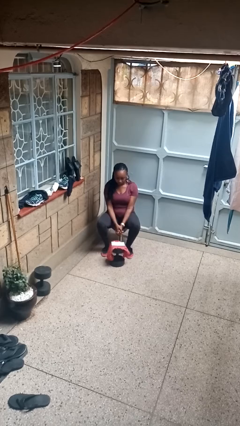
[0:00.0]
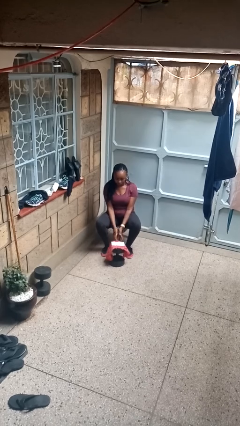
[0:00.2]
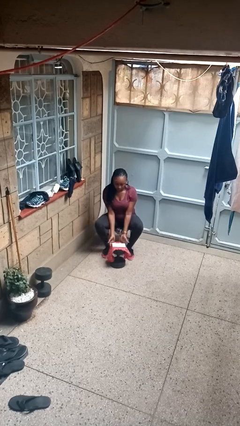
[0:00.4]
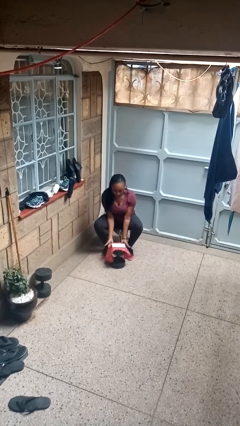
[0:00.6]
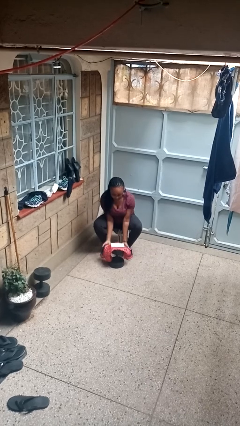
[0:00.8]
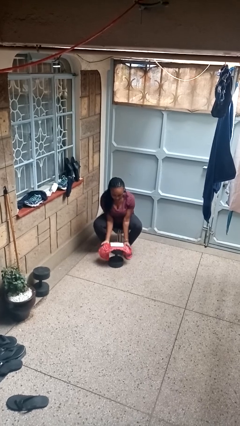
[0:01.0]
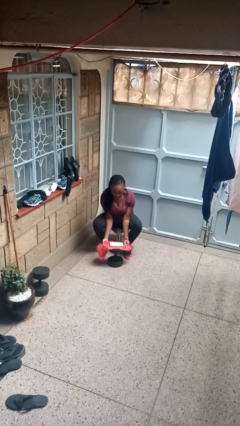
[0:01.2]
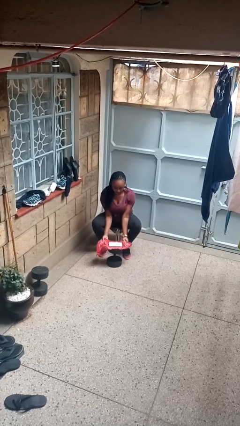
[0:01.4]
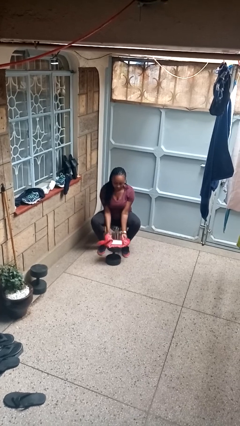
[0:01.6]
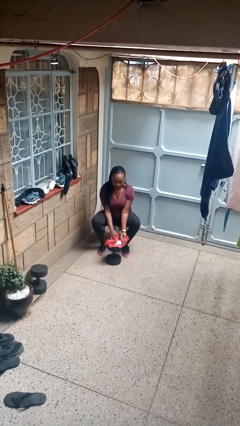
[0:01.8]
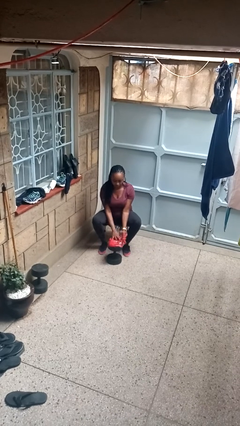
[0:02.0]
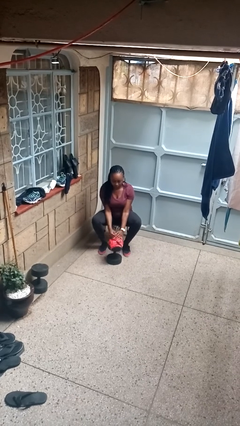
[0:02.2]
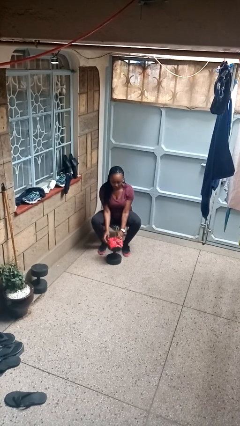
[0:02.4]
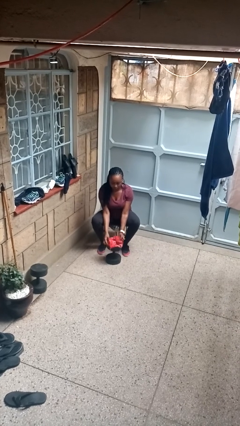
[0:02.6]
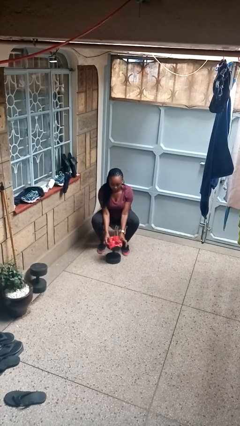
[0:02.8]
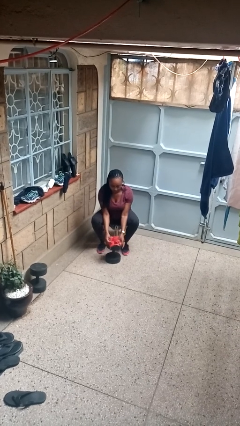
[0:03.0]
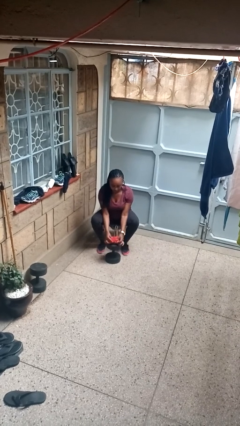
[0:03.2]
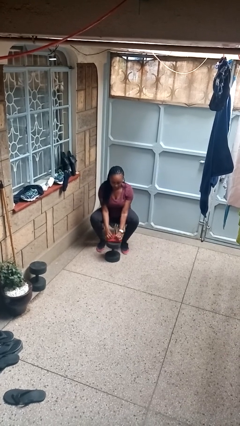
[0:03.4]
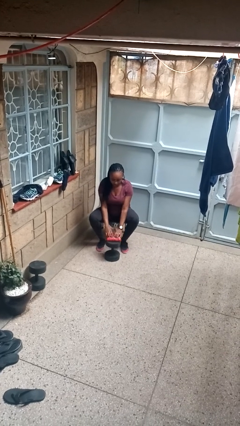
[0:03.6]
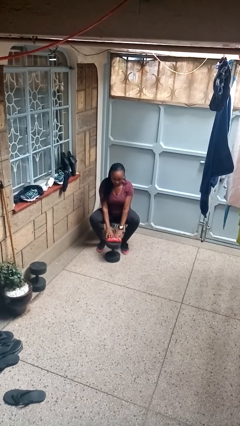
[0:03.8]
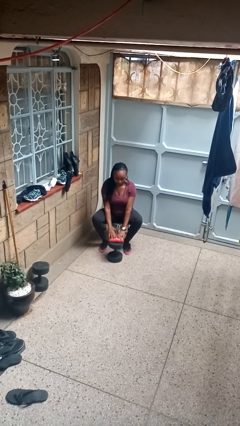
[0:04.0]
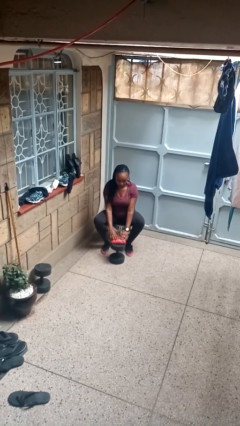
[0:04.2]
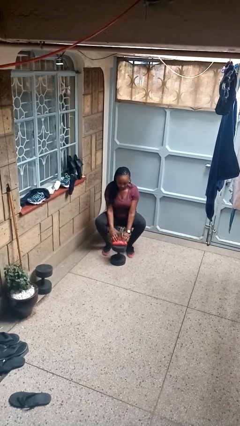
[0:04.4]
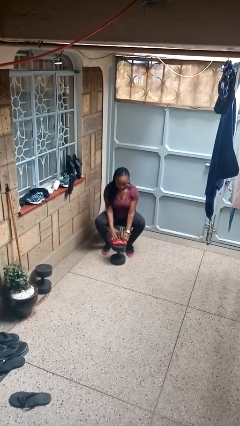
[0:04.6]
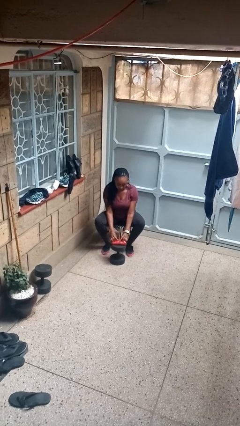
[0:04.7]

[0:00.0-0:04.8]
person wraps box

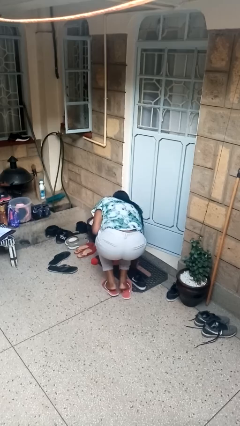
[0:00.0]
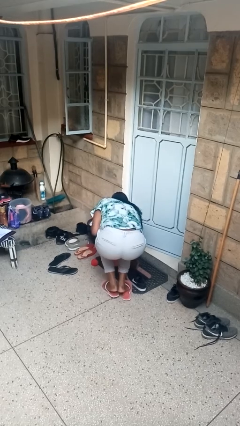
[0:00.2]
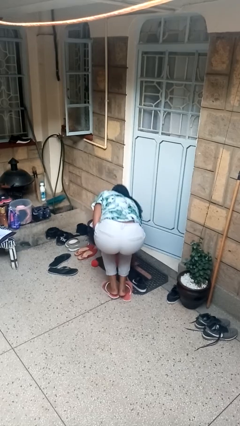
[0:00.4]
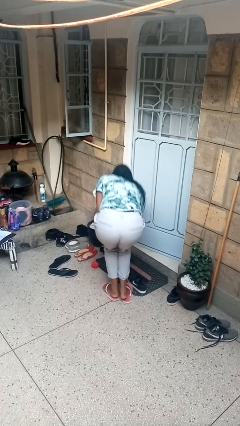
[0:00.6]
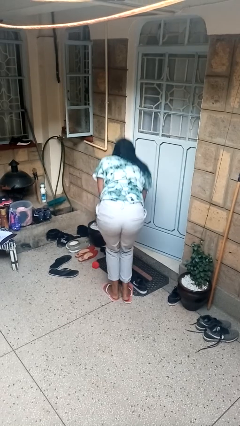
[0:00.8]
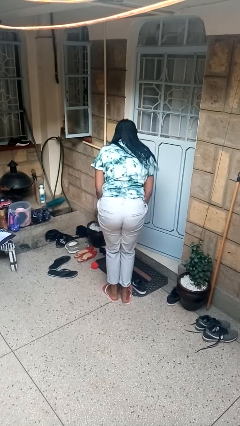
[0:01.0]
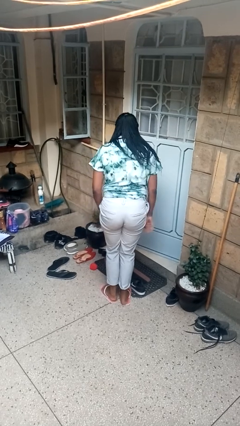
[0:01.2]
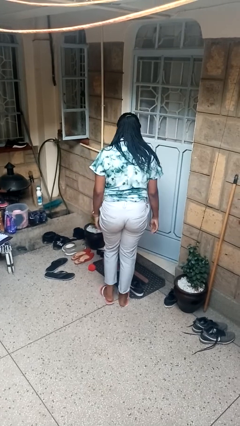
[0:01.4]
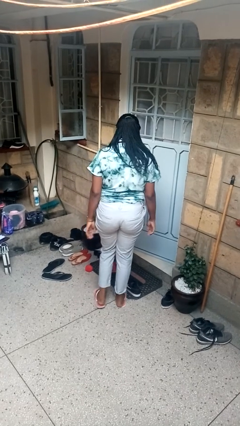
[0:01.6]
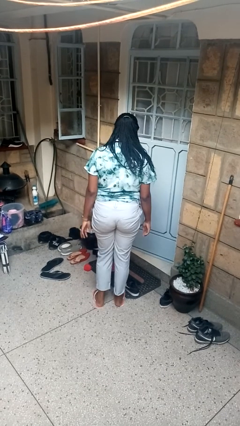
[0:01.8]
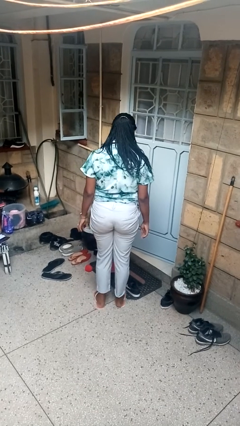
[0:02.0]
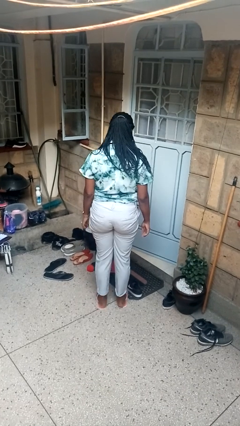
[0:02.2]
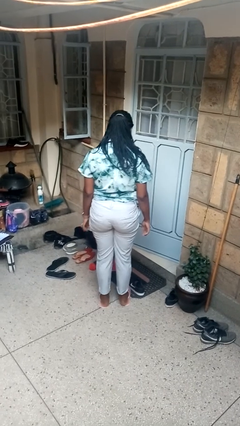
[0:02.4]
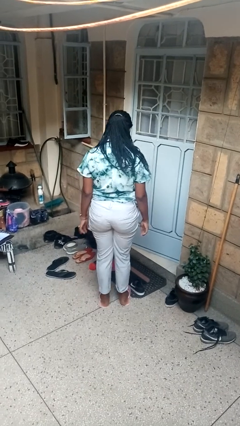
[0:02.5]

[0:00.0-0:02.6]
person stands up from floor

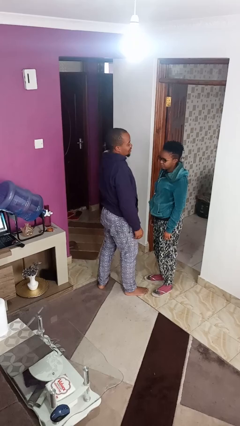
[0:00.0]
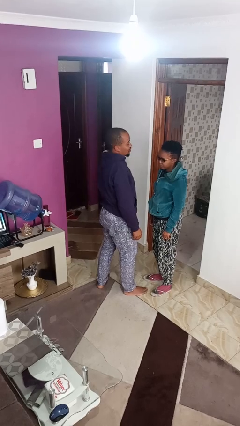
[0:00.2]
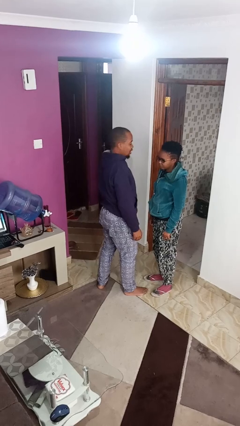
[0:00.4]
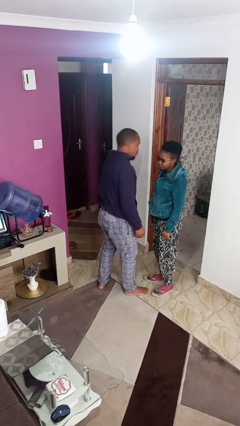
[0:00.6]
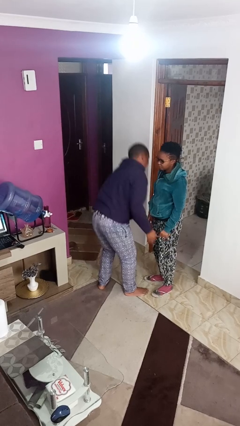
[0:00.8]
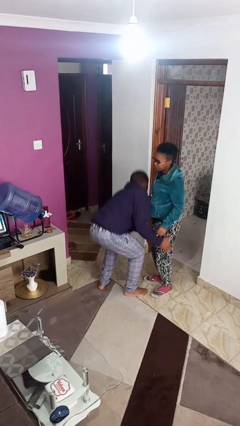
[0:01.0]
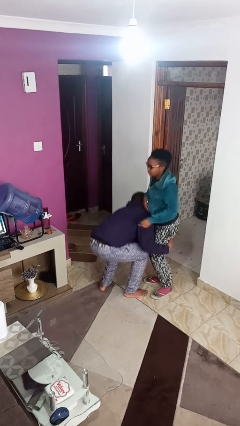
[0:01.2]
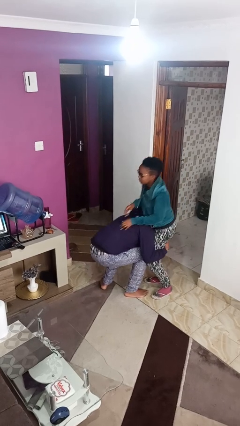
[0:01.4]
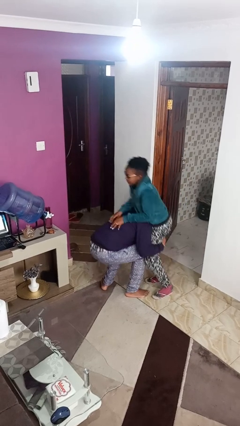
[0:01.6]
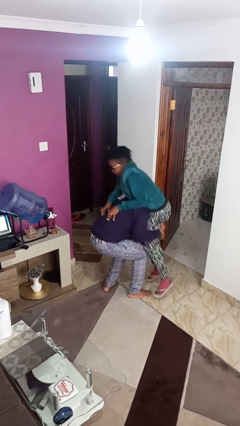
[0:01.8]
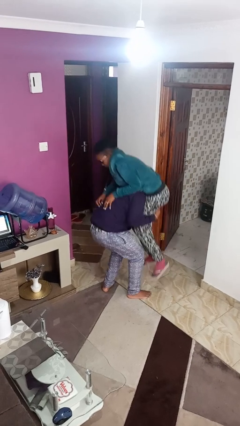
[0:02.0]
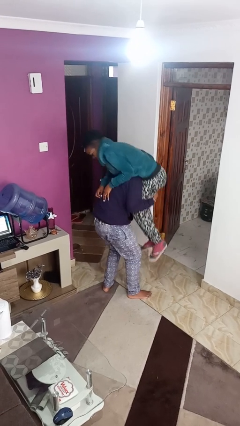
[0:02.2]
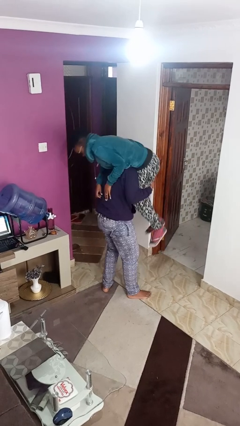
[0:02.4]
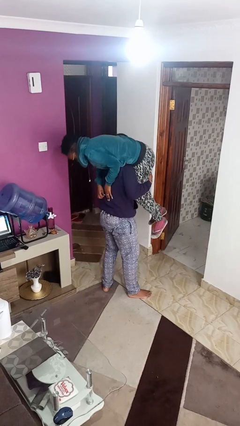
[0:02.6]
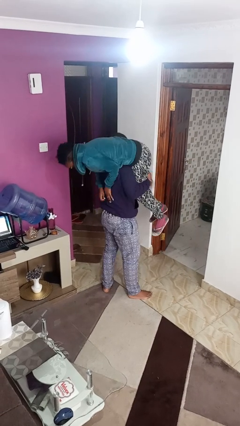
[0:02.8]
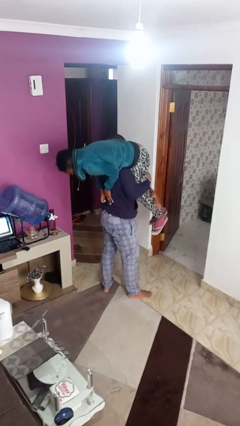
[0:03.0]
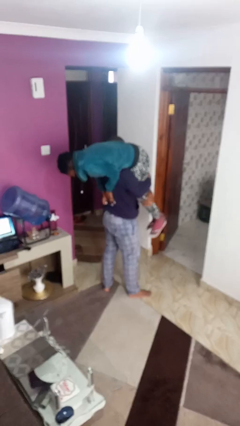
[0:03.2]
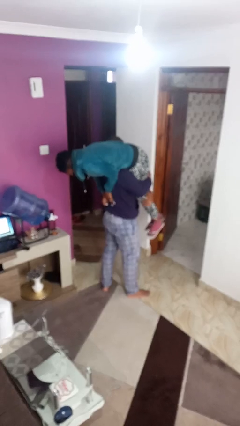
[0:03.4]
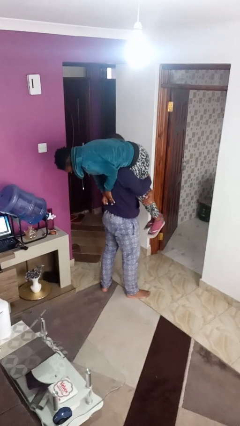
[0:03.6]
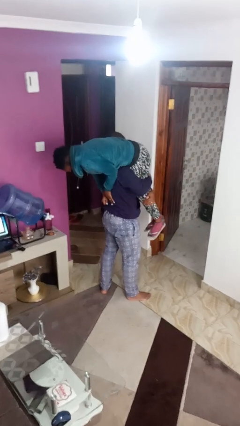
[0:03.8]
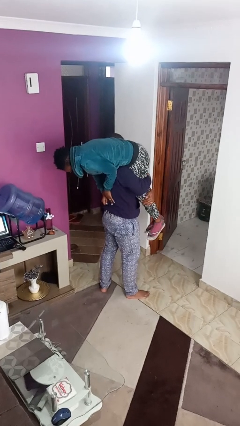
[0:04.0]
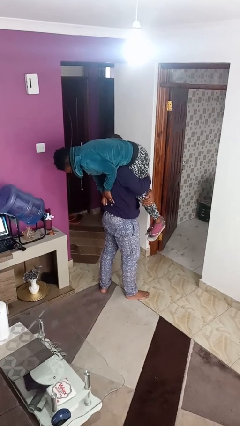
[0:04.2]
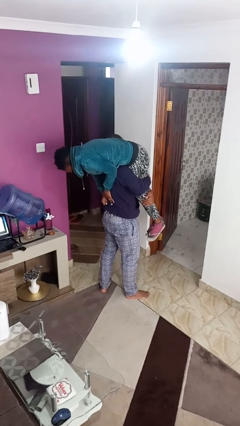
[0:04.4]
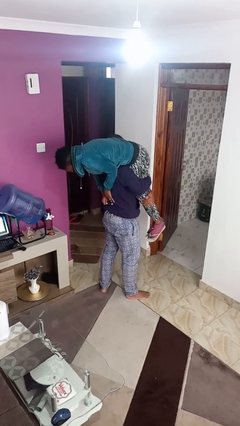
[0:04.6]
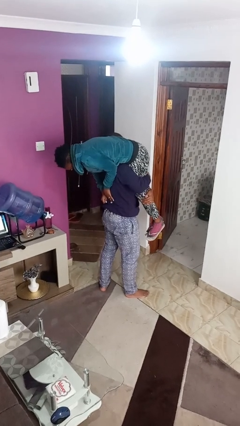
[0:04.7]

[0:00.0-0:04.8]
person carries person over shoulder

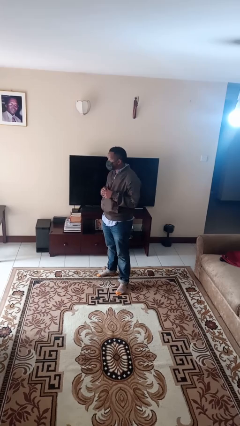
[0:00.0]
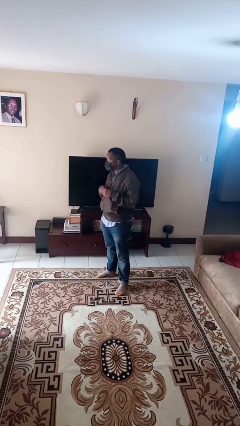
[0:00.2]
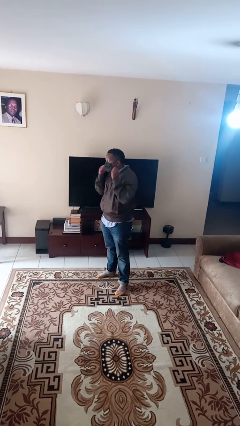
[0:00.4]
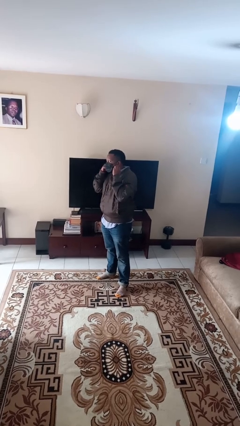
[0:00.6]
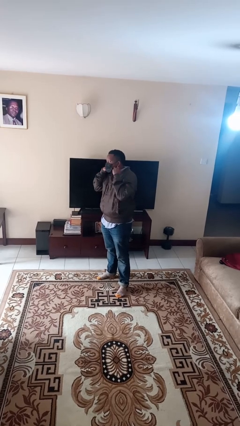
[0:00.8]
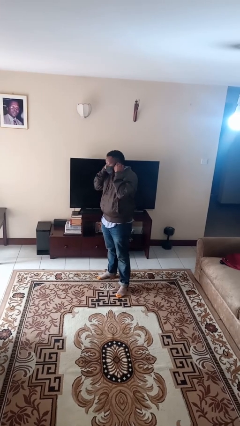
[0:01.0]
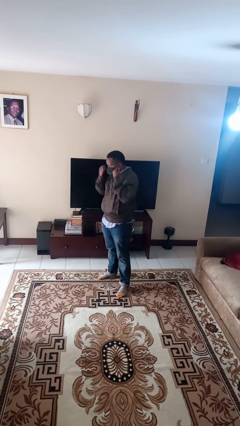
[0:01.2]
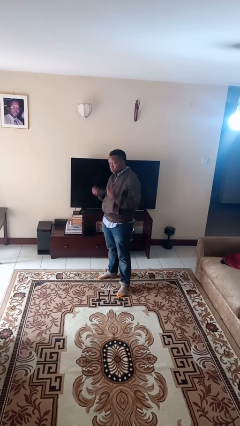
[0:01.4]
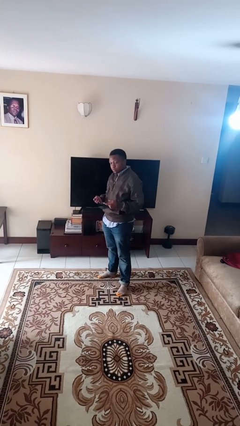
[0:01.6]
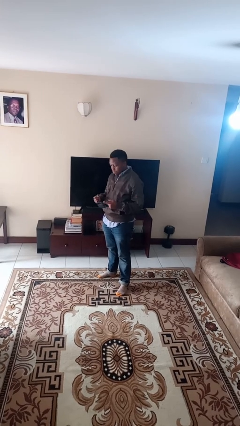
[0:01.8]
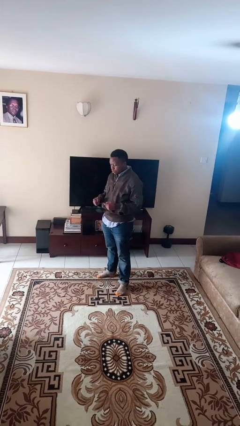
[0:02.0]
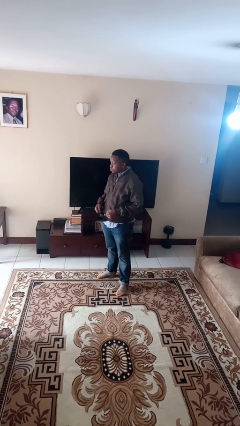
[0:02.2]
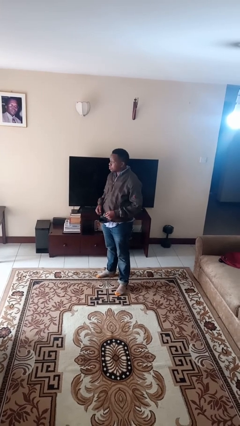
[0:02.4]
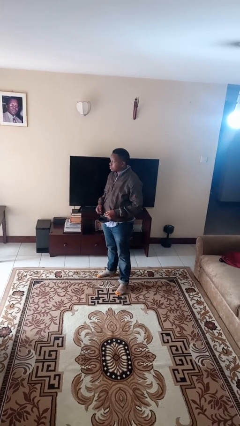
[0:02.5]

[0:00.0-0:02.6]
person takes off facemask

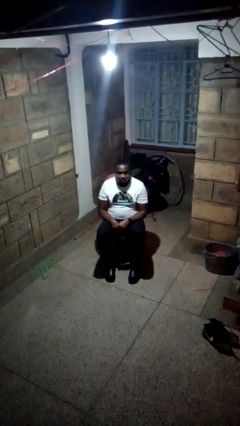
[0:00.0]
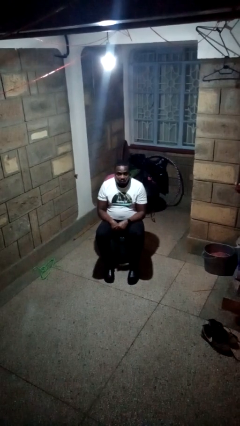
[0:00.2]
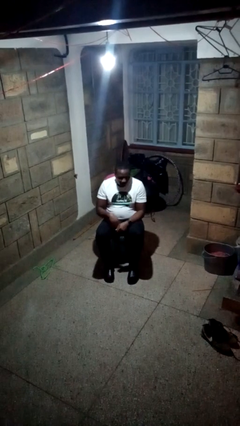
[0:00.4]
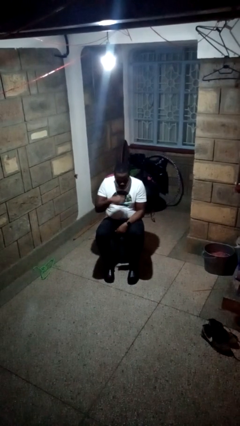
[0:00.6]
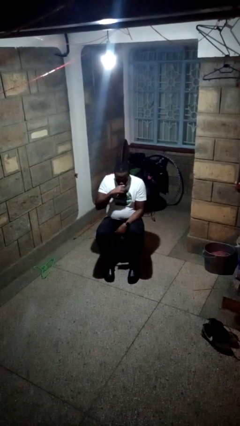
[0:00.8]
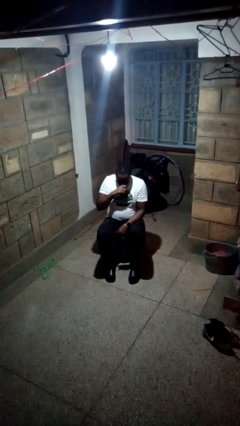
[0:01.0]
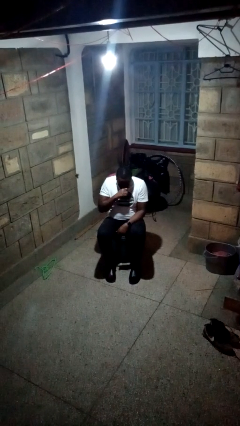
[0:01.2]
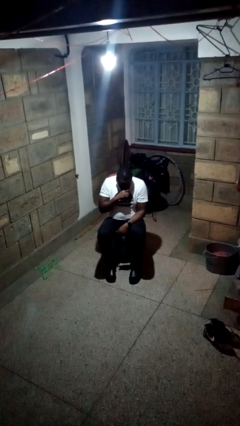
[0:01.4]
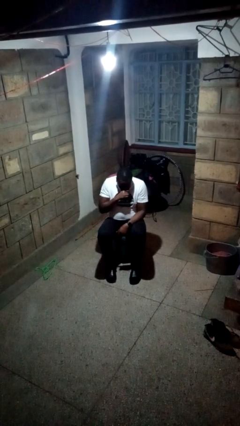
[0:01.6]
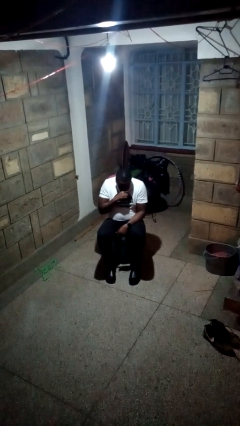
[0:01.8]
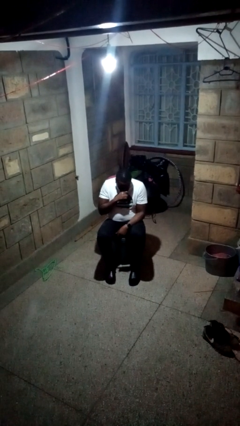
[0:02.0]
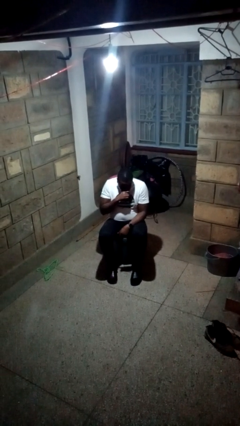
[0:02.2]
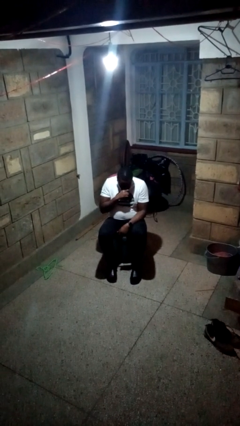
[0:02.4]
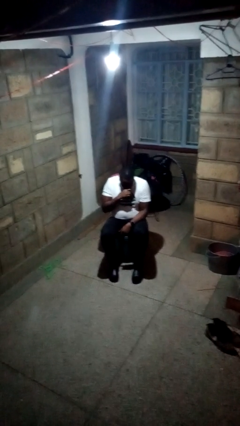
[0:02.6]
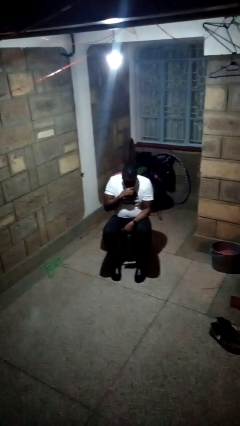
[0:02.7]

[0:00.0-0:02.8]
person sneezes into hand
